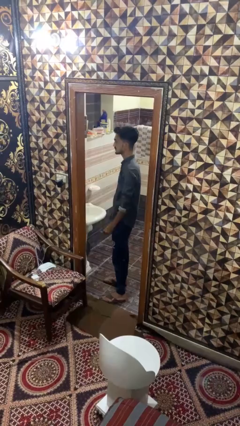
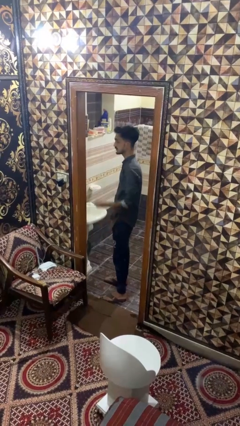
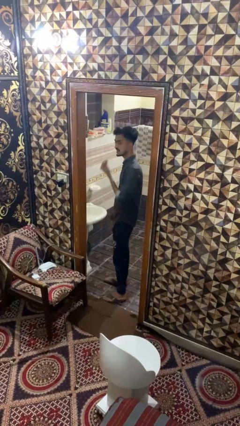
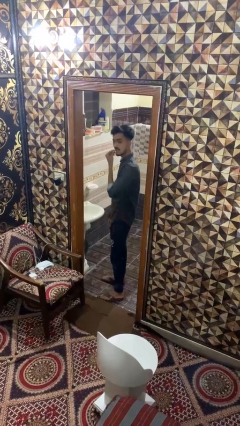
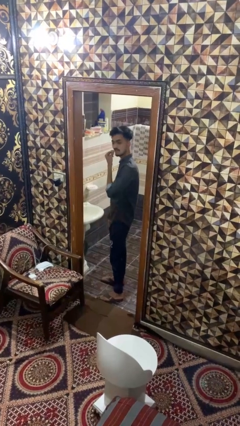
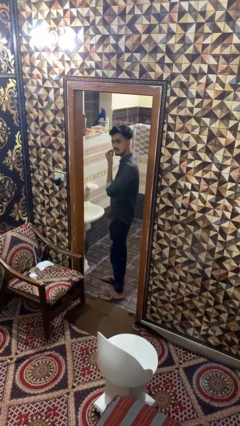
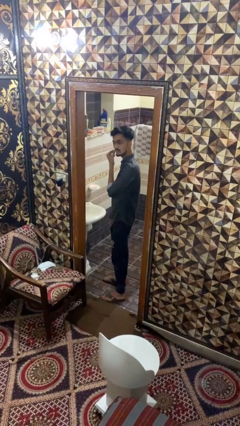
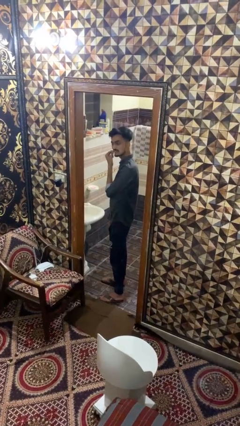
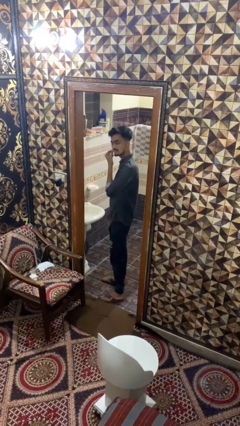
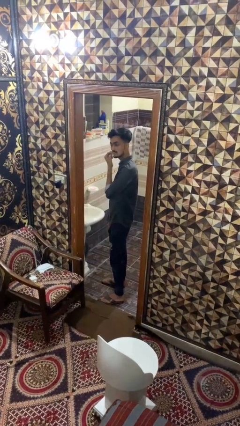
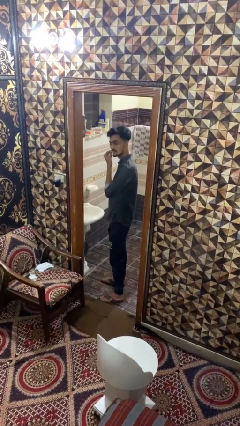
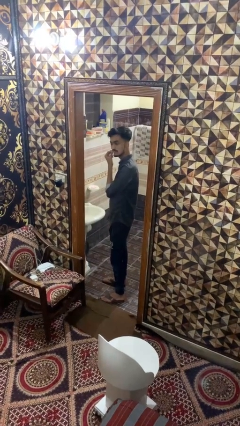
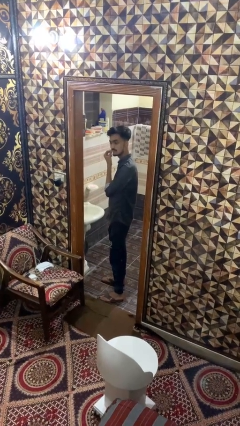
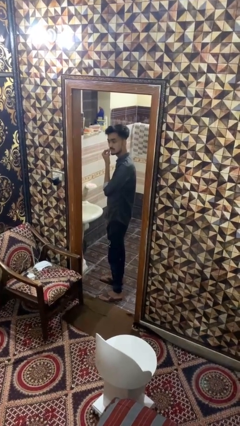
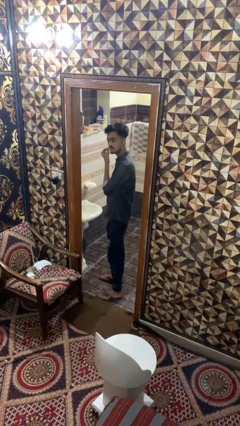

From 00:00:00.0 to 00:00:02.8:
person flosses

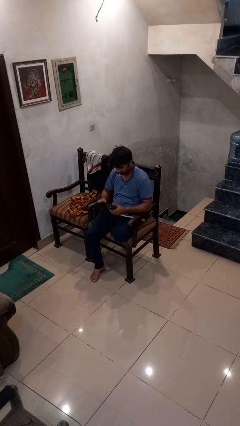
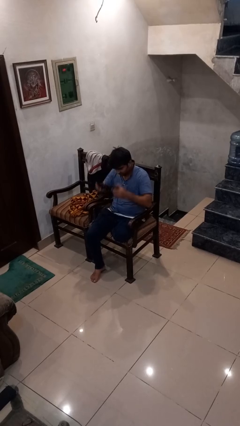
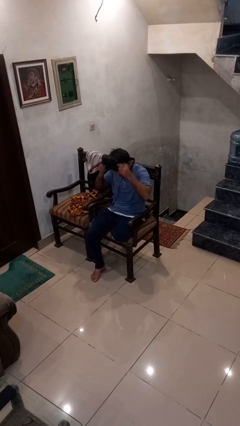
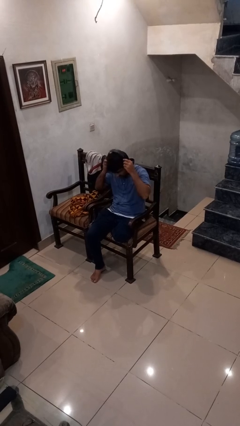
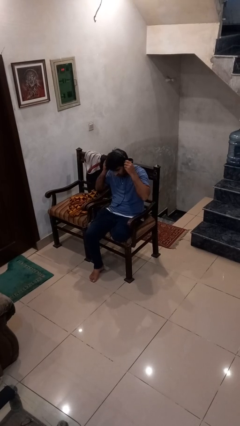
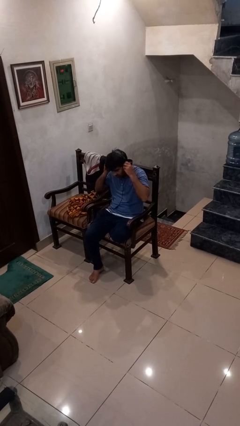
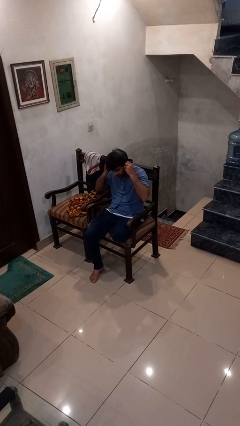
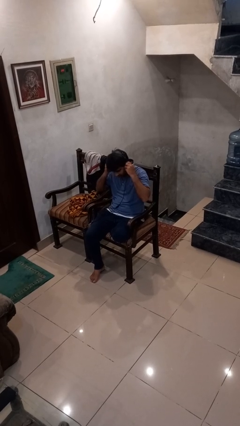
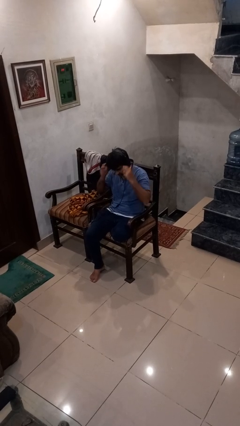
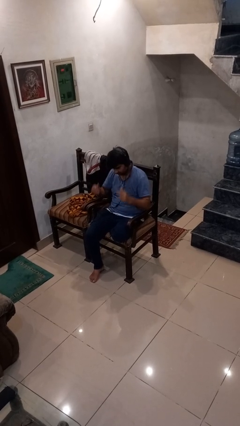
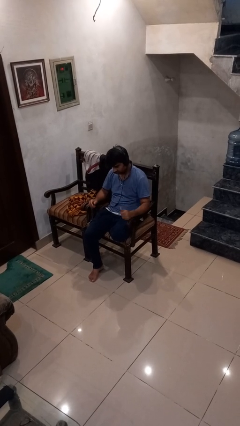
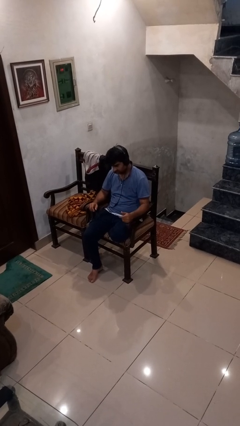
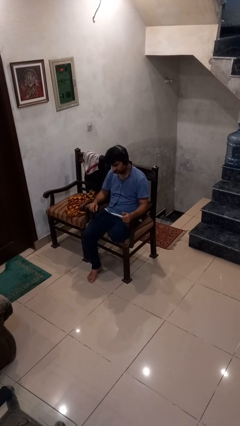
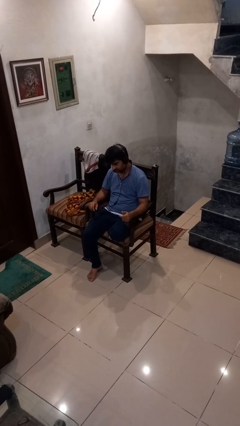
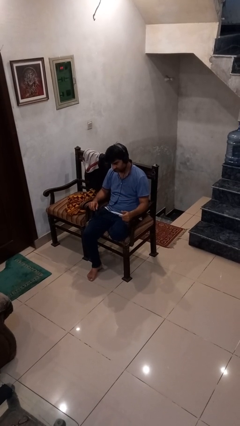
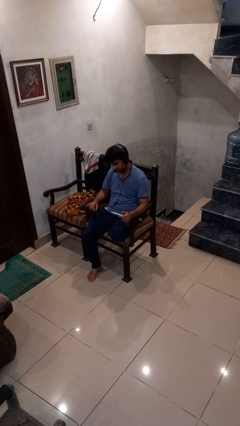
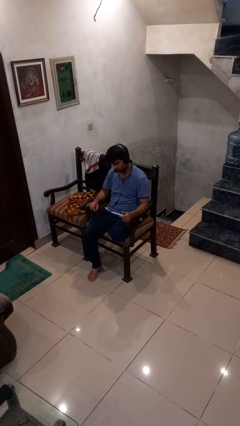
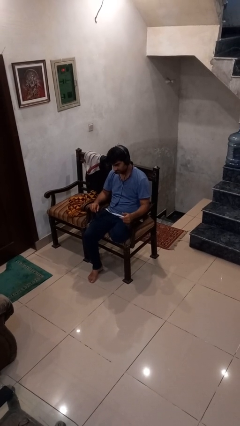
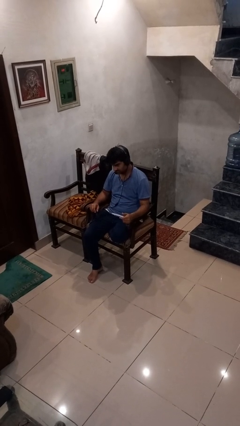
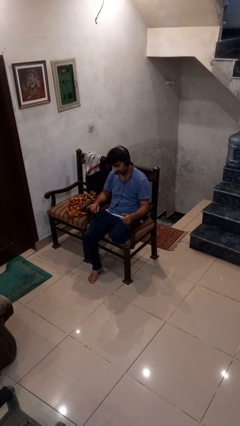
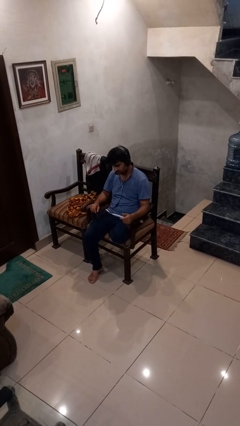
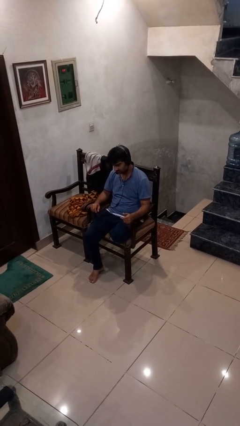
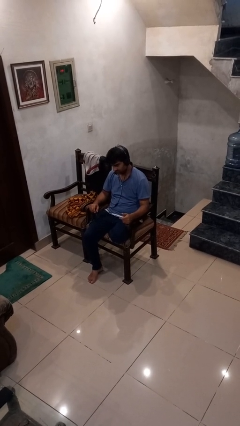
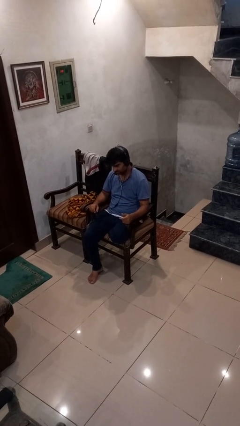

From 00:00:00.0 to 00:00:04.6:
person puts on headphones

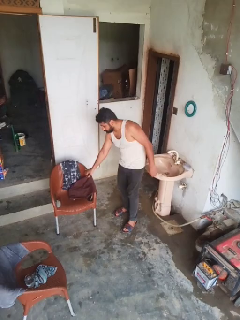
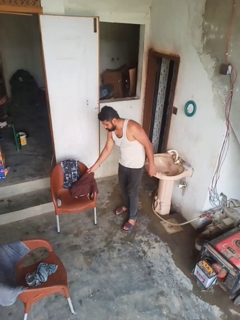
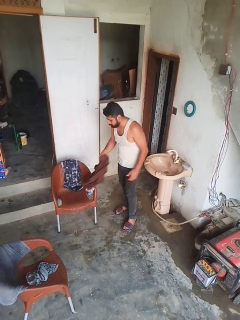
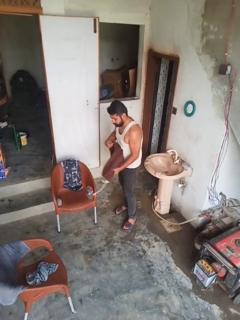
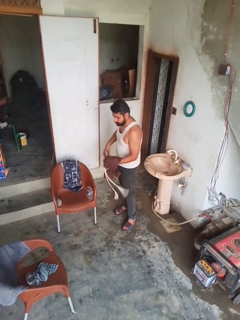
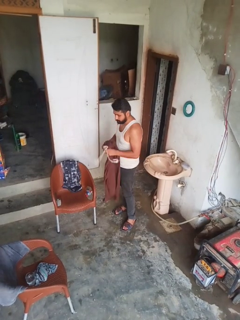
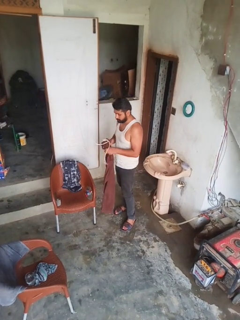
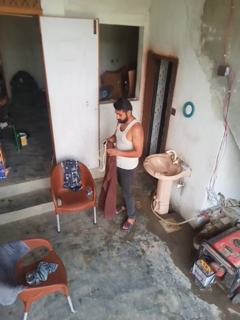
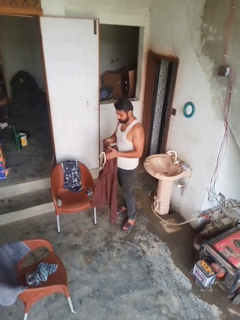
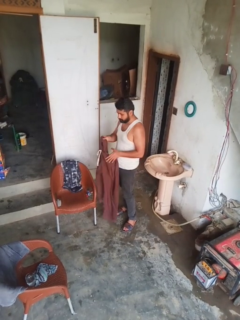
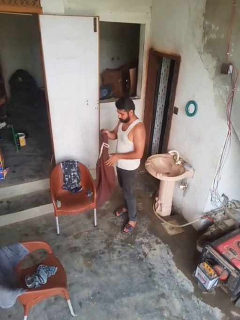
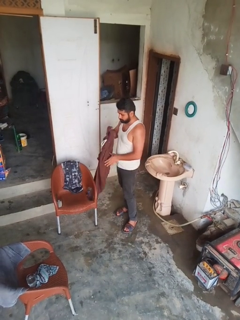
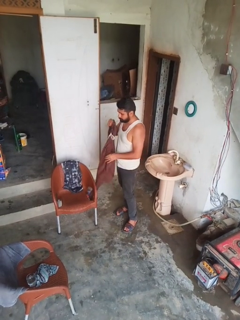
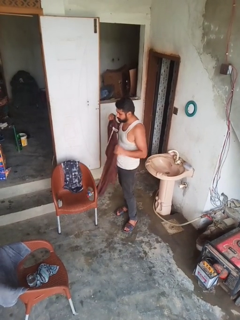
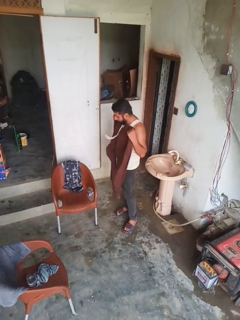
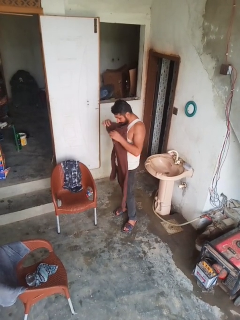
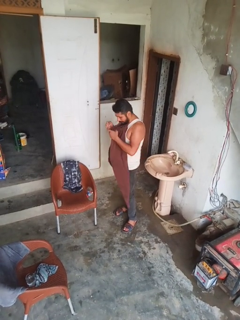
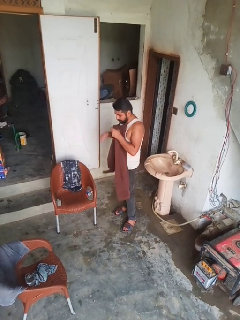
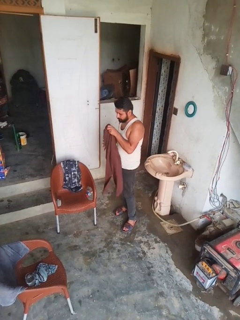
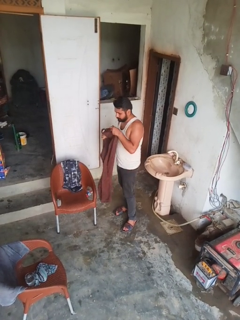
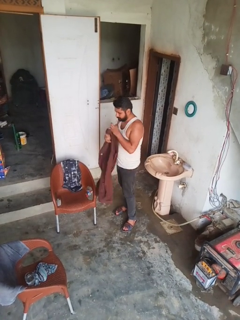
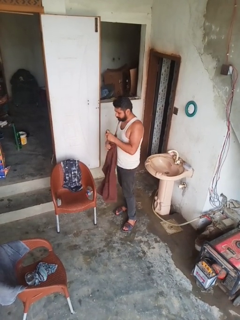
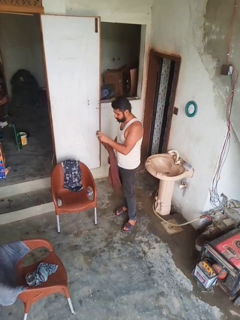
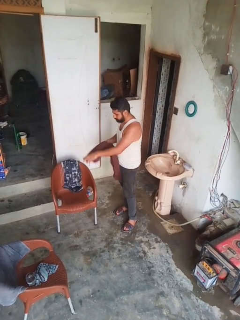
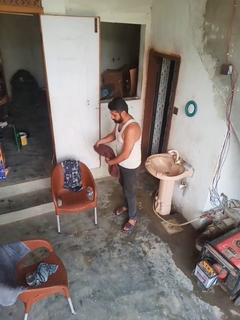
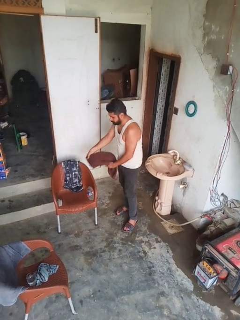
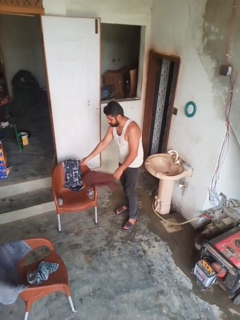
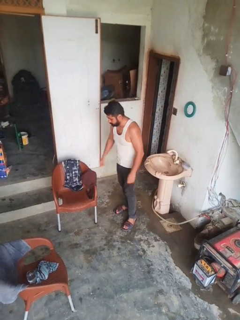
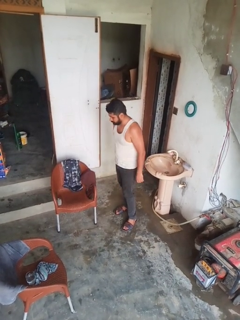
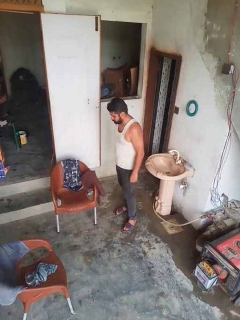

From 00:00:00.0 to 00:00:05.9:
person folds pants

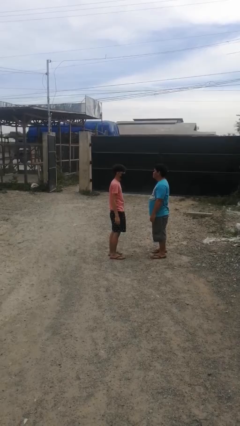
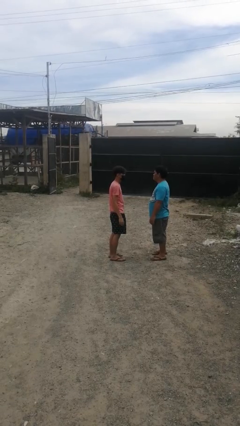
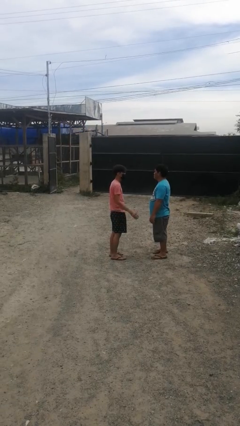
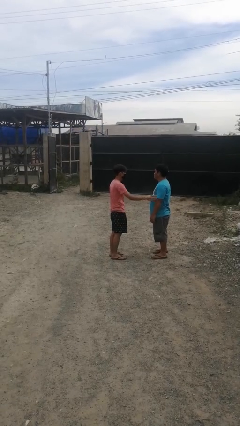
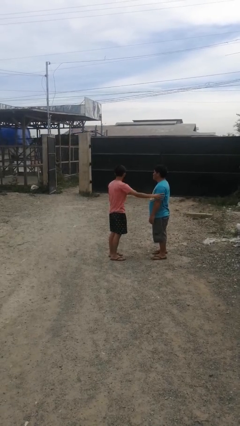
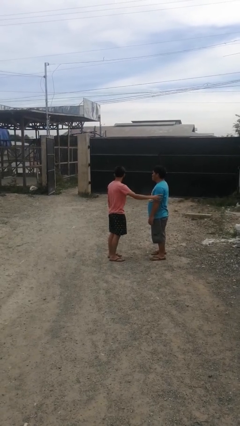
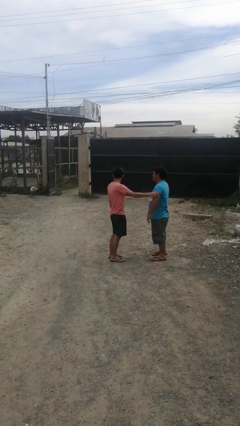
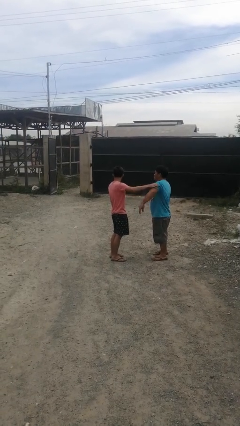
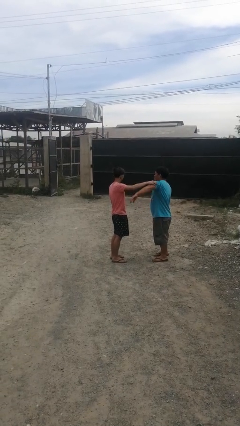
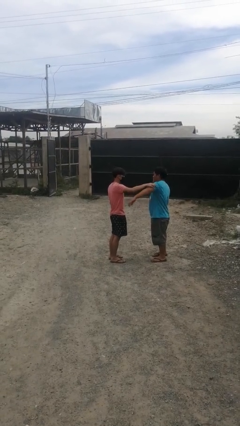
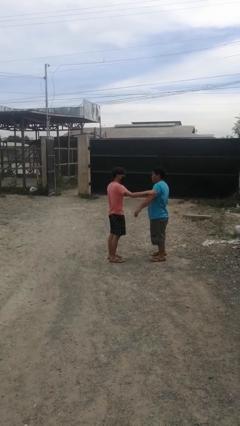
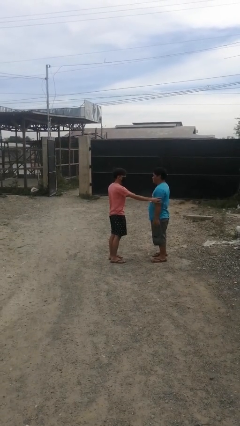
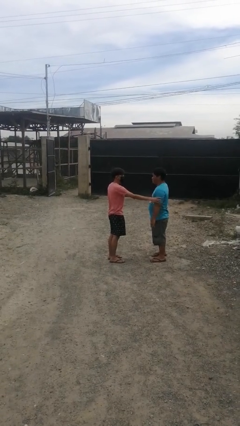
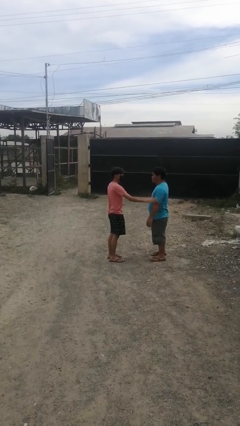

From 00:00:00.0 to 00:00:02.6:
person grabs person by bicep

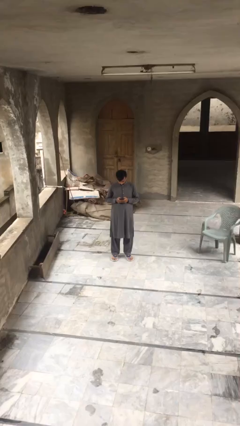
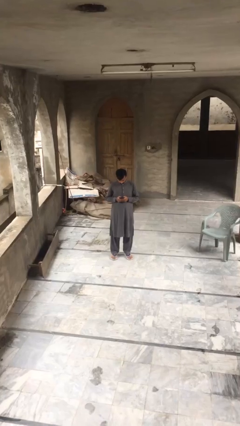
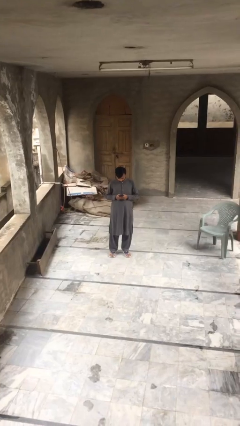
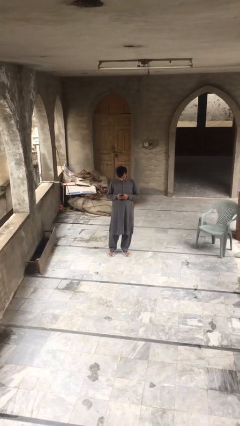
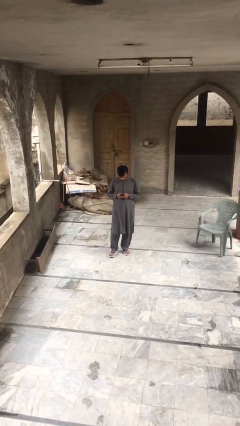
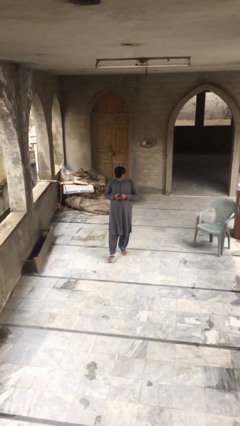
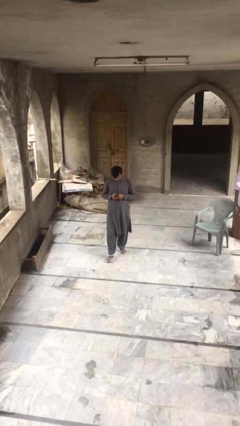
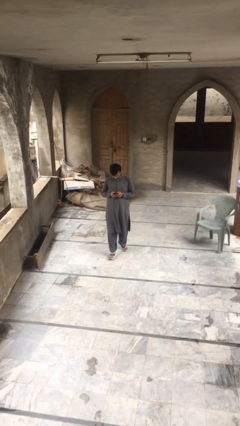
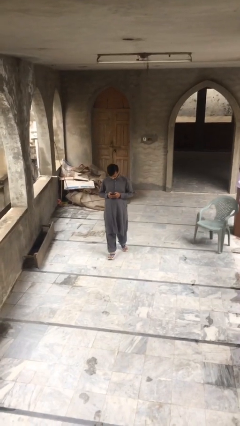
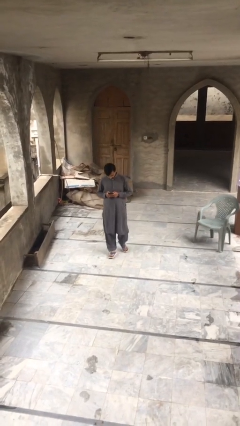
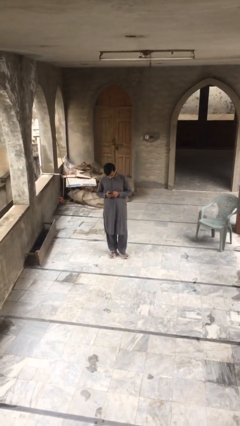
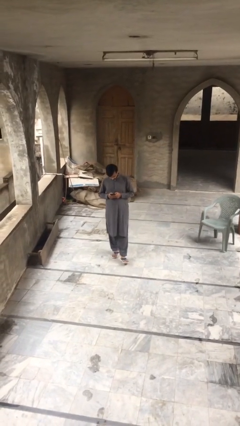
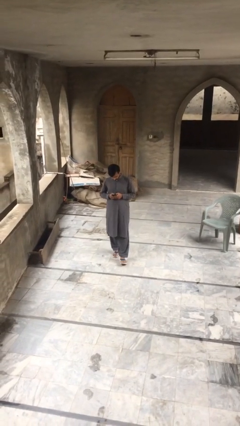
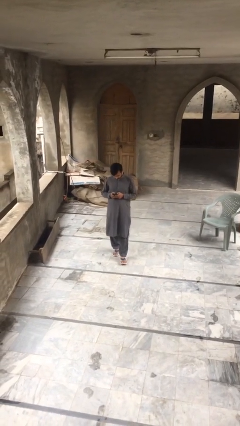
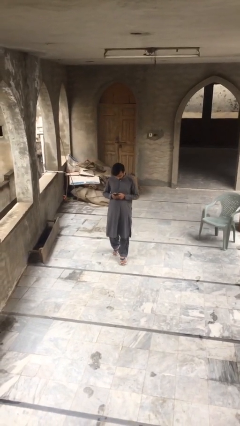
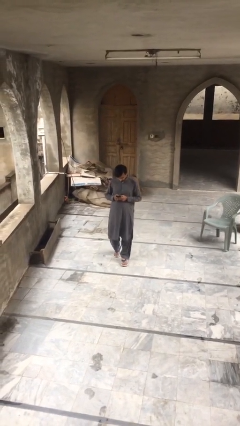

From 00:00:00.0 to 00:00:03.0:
person texts on phone

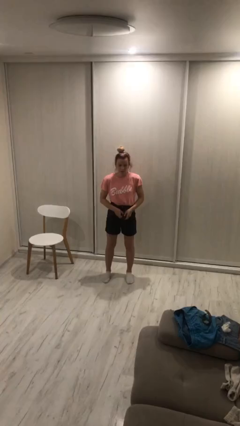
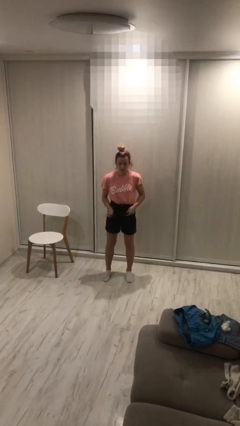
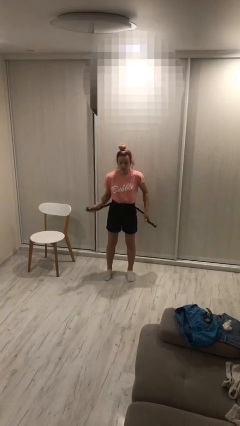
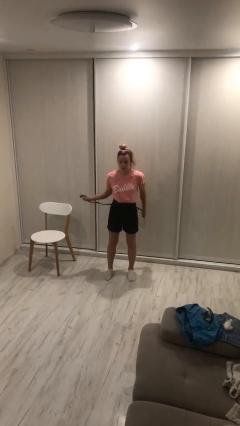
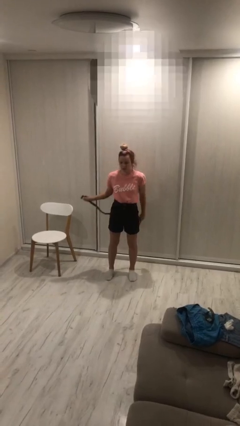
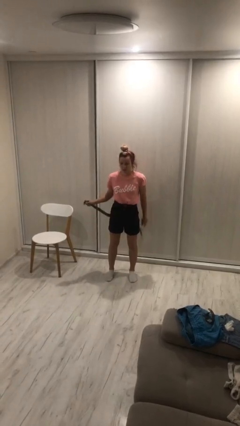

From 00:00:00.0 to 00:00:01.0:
person takes off belt
